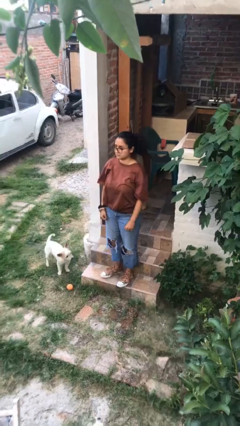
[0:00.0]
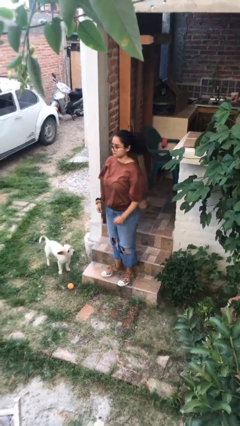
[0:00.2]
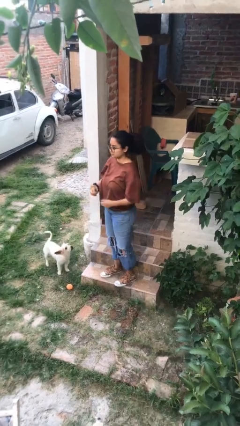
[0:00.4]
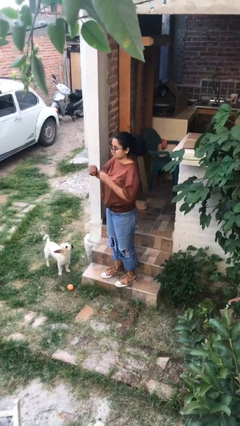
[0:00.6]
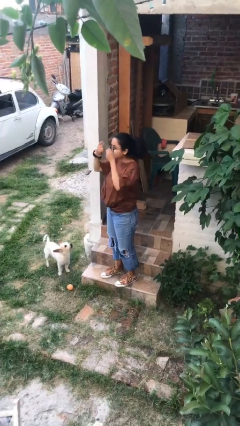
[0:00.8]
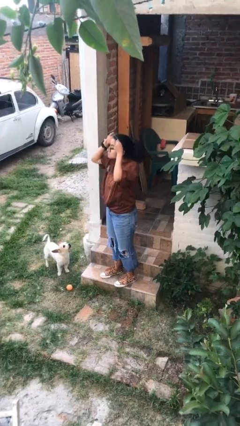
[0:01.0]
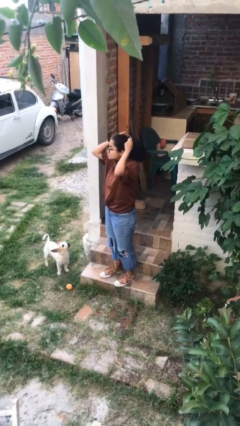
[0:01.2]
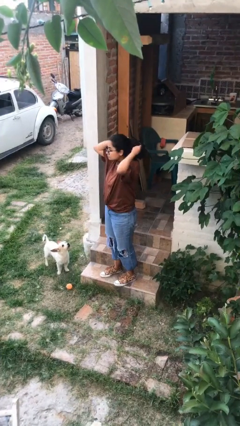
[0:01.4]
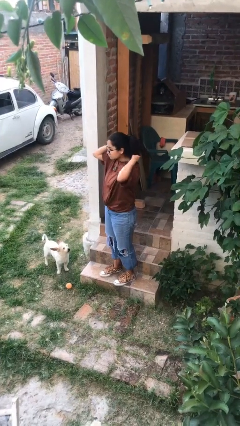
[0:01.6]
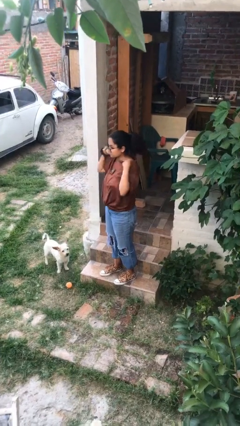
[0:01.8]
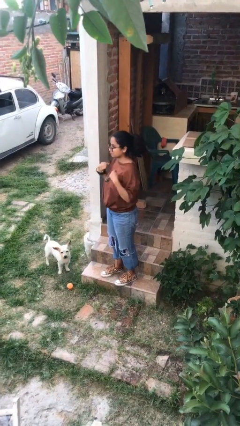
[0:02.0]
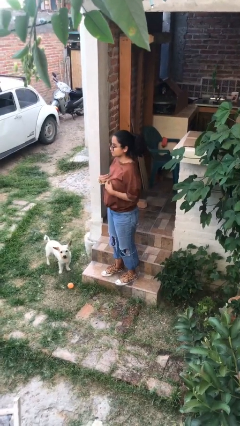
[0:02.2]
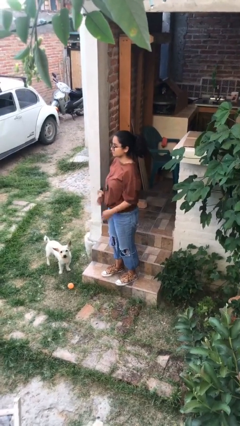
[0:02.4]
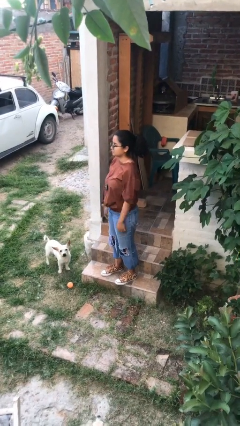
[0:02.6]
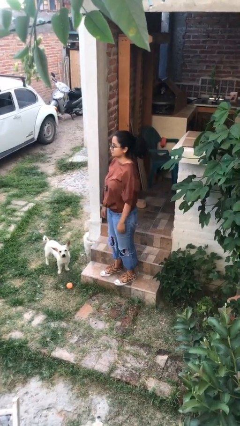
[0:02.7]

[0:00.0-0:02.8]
person puts on necklace

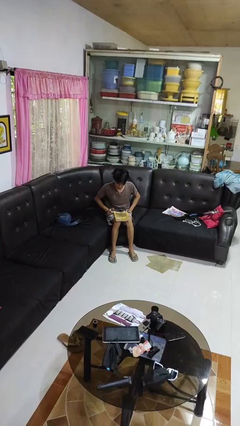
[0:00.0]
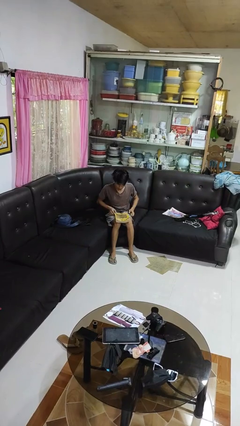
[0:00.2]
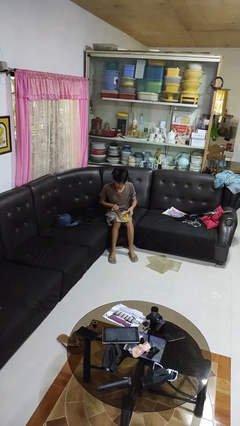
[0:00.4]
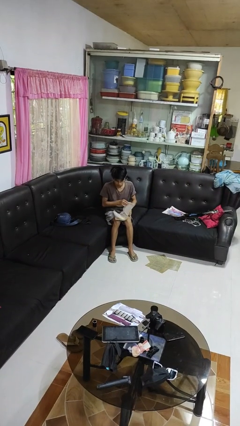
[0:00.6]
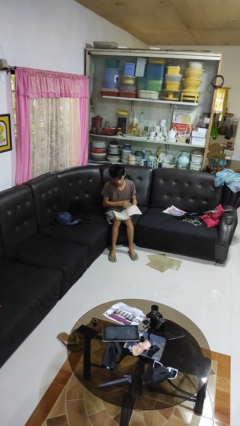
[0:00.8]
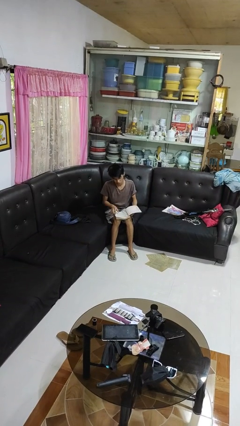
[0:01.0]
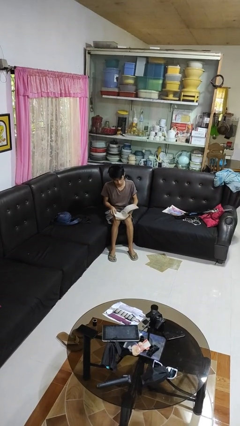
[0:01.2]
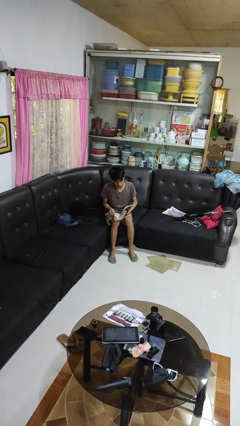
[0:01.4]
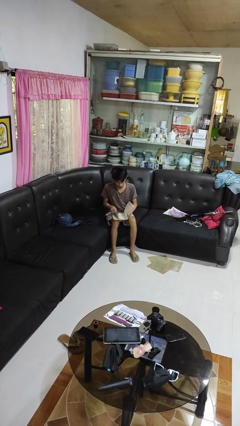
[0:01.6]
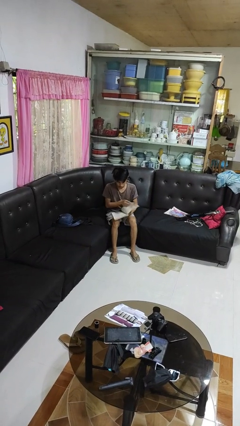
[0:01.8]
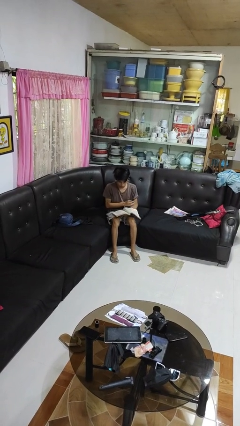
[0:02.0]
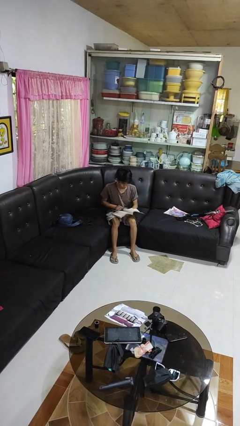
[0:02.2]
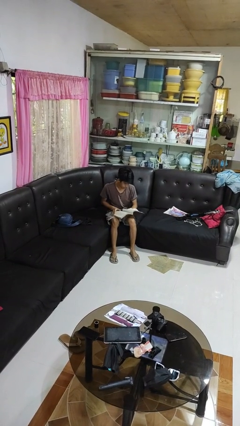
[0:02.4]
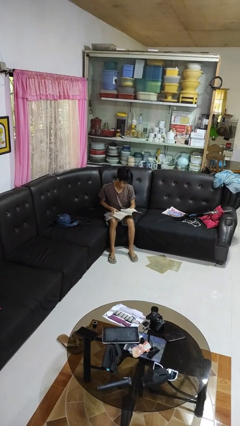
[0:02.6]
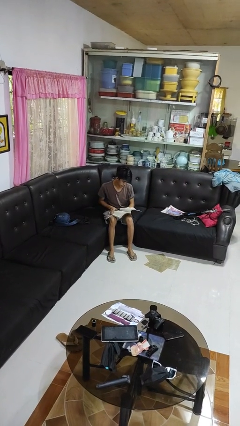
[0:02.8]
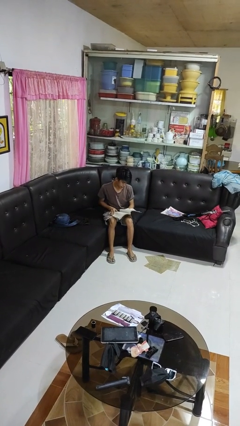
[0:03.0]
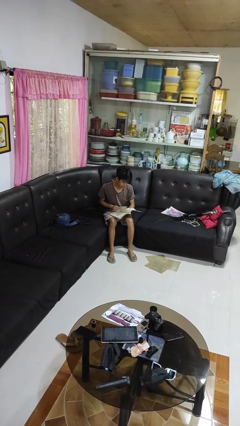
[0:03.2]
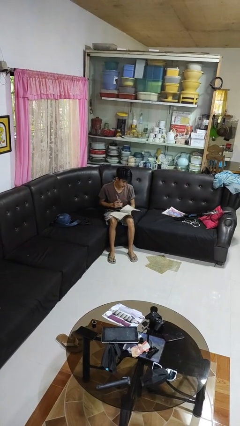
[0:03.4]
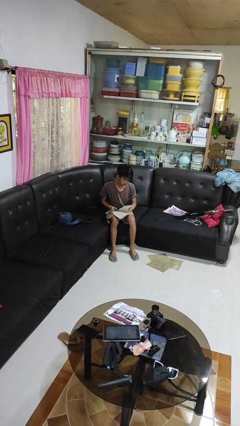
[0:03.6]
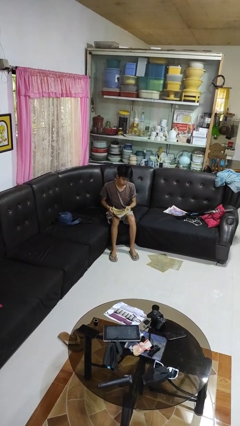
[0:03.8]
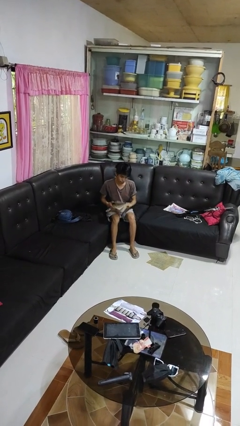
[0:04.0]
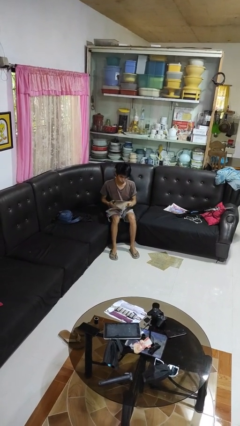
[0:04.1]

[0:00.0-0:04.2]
person reads book

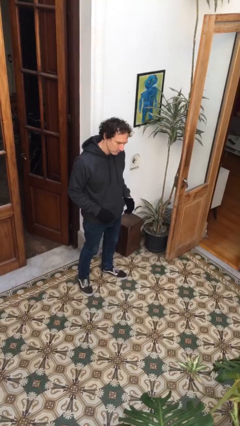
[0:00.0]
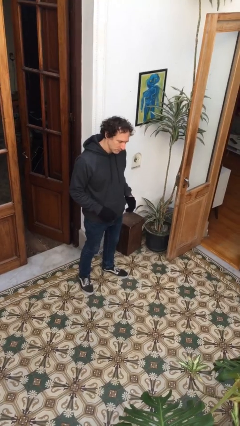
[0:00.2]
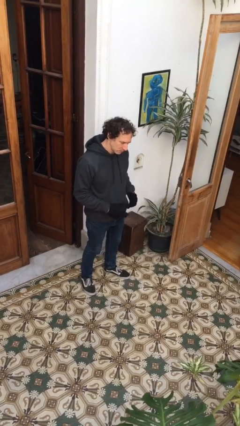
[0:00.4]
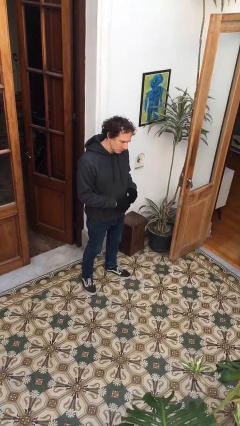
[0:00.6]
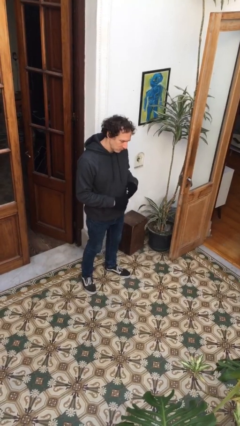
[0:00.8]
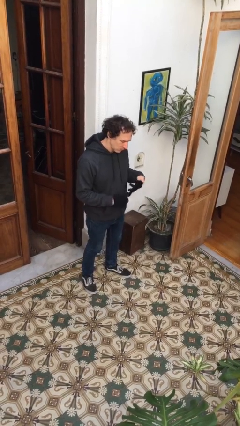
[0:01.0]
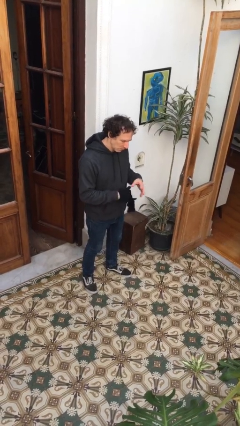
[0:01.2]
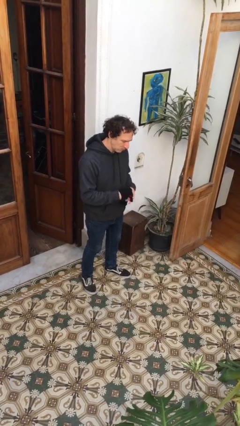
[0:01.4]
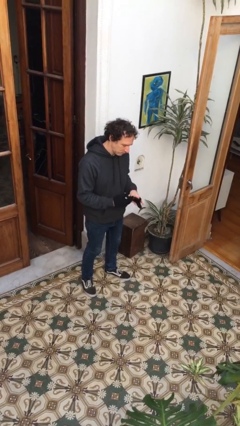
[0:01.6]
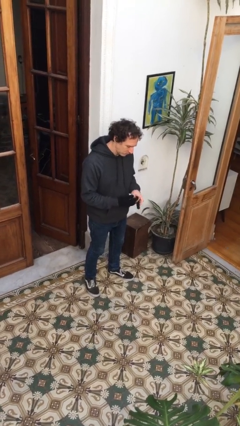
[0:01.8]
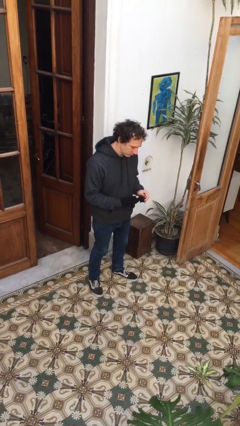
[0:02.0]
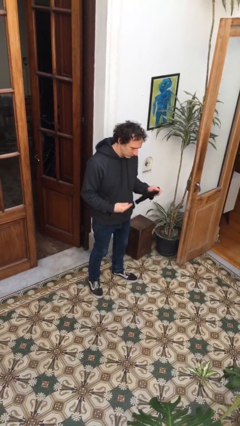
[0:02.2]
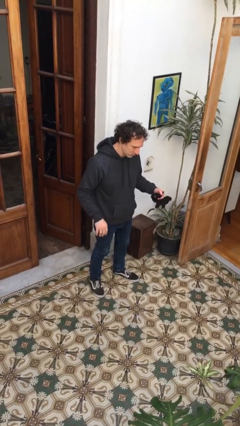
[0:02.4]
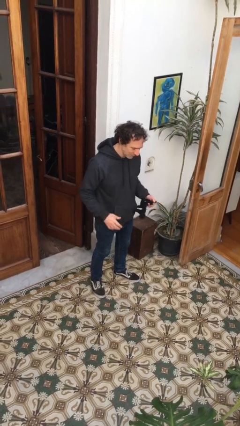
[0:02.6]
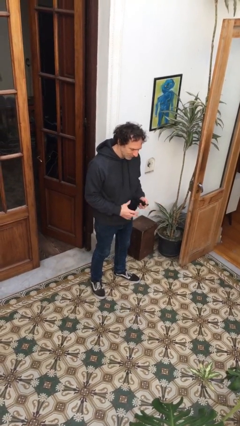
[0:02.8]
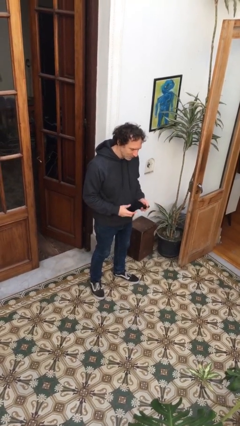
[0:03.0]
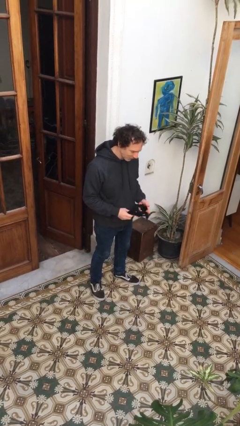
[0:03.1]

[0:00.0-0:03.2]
person takes off gloves

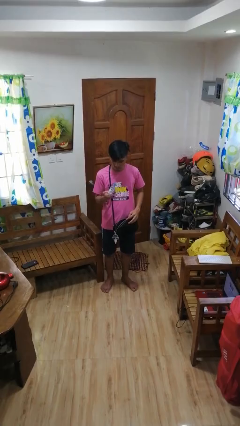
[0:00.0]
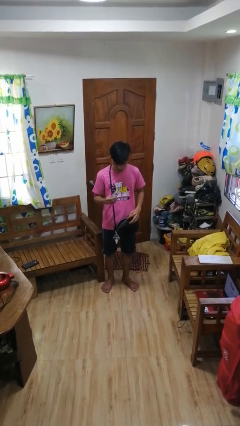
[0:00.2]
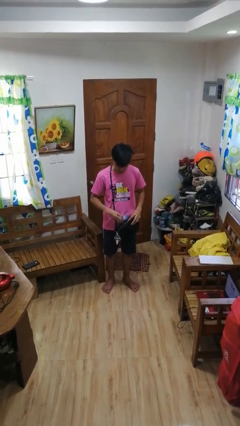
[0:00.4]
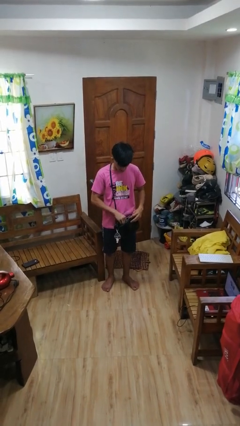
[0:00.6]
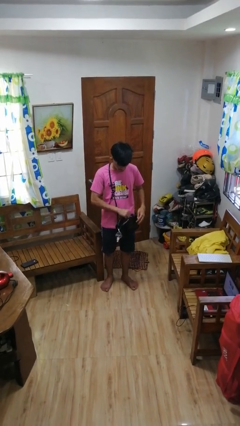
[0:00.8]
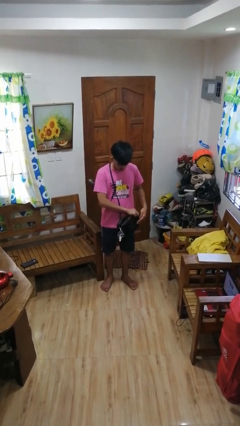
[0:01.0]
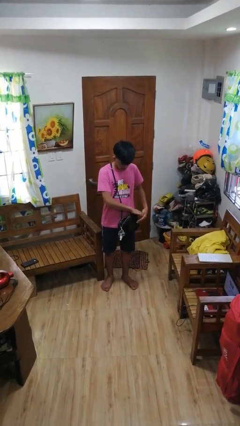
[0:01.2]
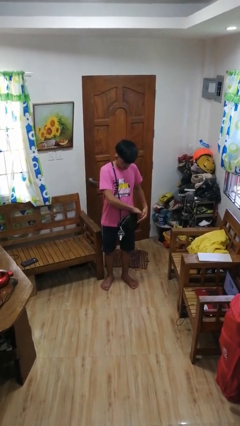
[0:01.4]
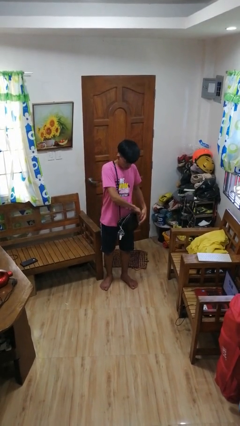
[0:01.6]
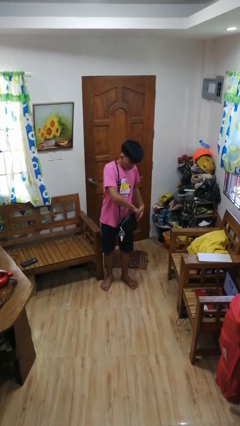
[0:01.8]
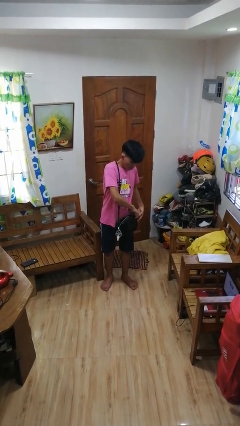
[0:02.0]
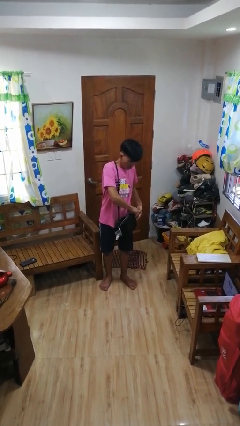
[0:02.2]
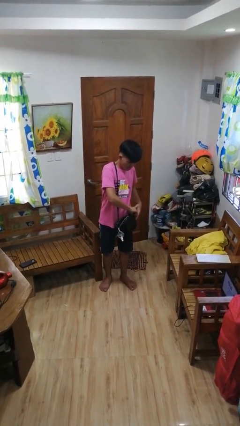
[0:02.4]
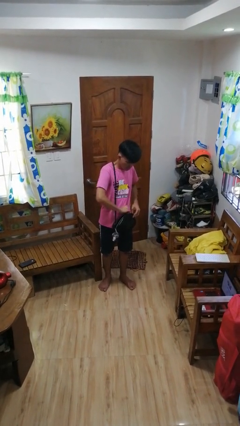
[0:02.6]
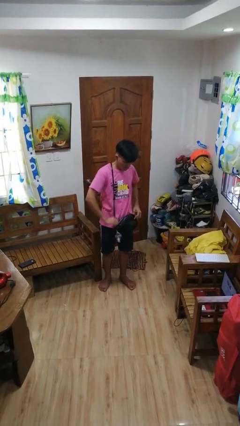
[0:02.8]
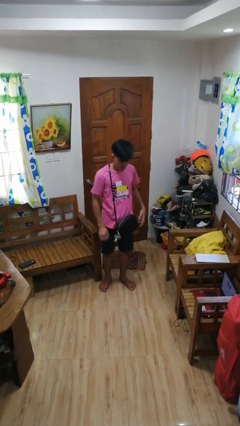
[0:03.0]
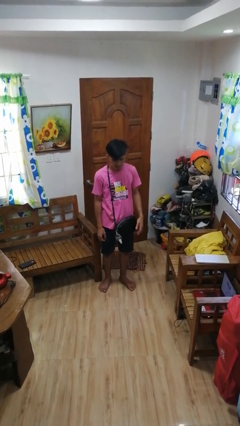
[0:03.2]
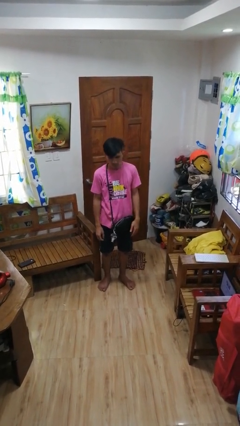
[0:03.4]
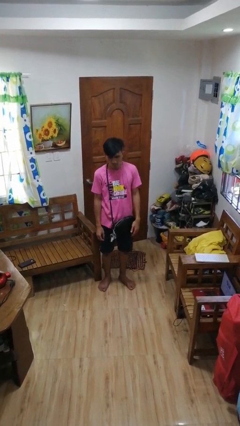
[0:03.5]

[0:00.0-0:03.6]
person puts object into purse

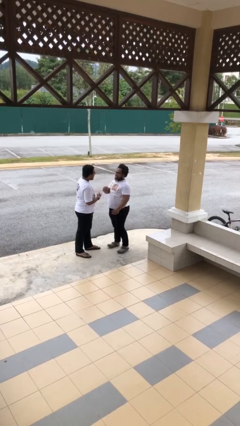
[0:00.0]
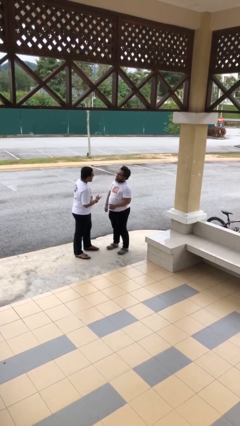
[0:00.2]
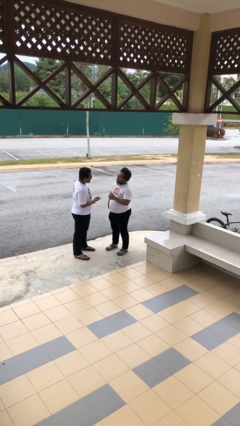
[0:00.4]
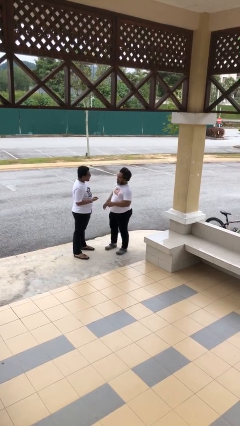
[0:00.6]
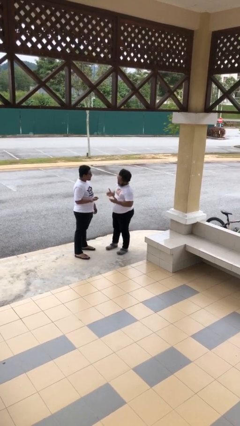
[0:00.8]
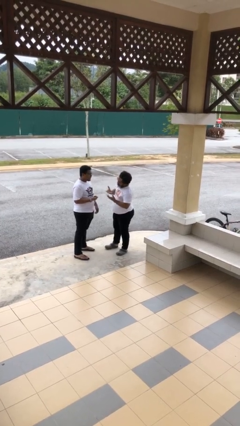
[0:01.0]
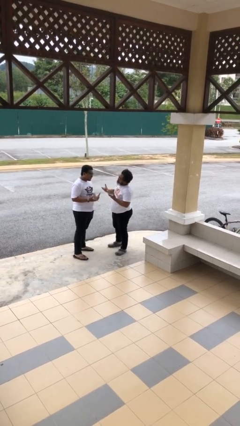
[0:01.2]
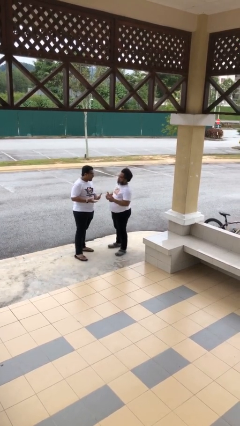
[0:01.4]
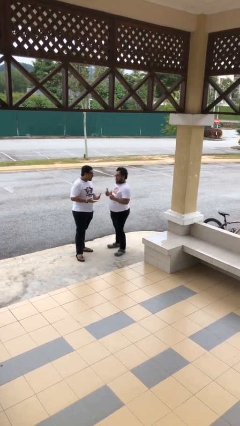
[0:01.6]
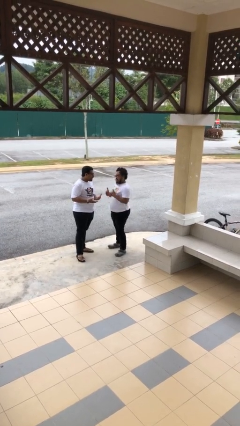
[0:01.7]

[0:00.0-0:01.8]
person talks to person

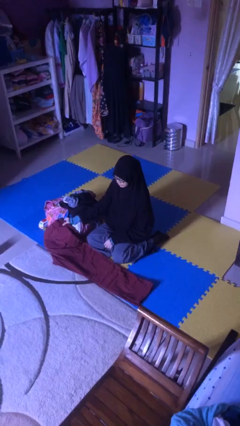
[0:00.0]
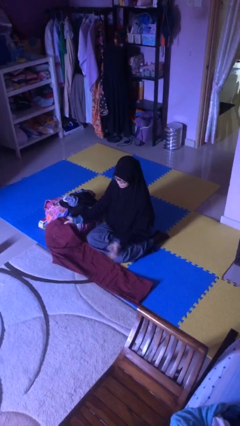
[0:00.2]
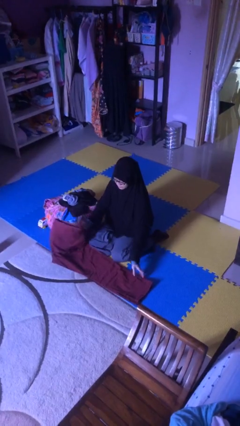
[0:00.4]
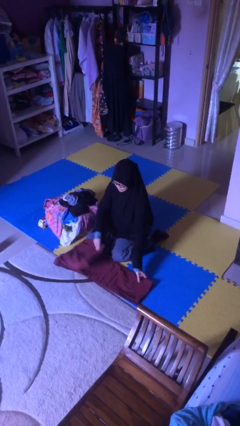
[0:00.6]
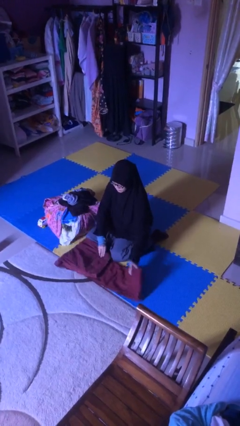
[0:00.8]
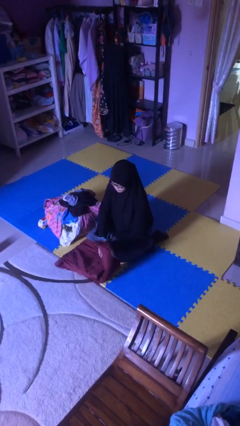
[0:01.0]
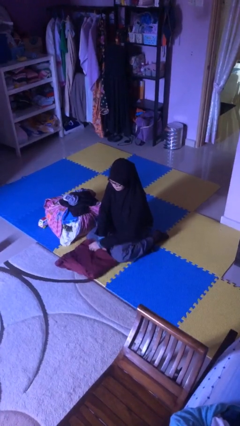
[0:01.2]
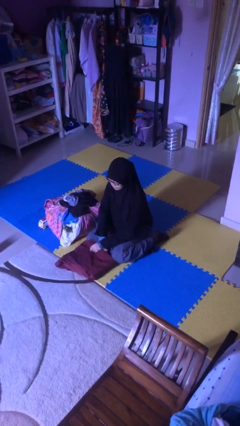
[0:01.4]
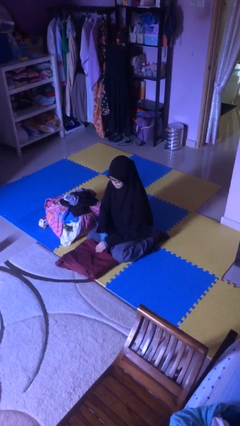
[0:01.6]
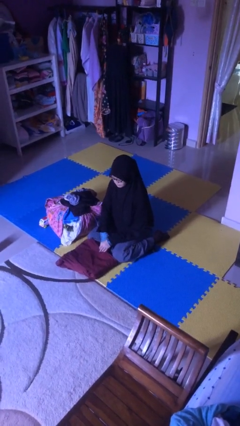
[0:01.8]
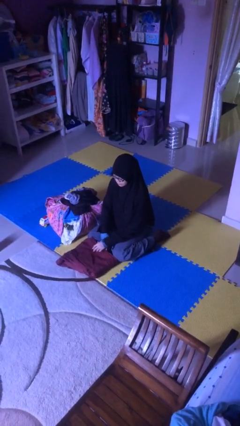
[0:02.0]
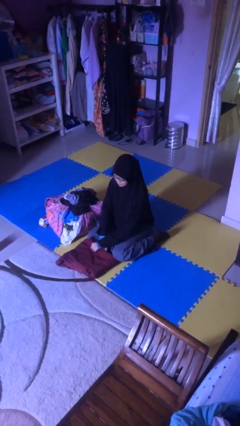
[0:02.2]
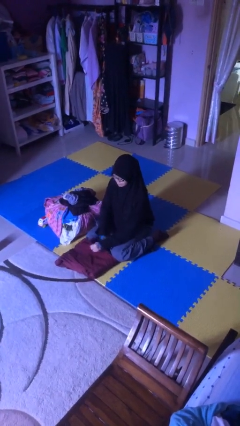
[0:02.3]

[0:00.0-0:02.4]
person folds pants
